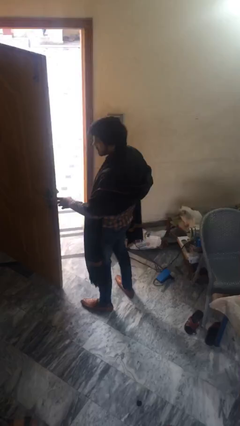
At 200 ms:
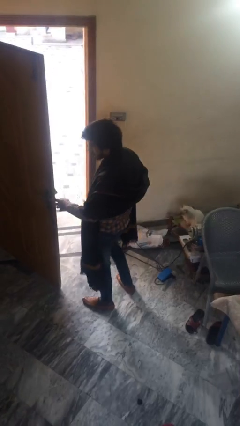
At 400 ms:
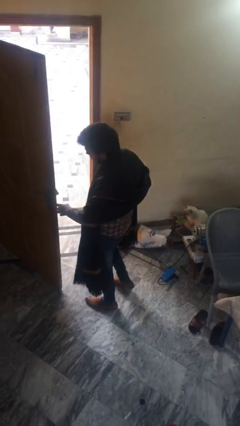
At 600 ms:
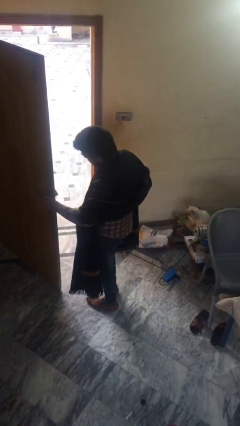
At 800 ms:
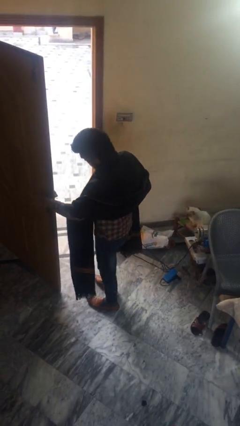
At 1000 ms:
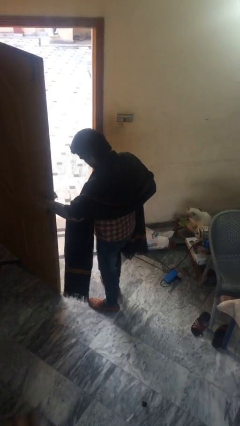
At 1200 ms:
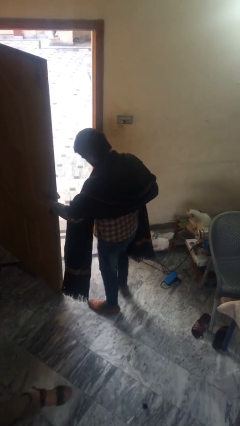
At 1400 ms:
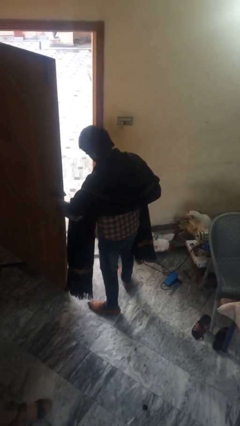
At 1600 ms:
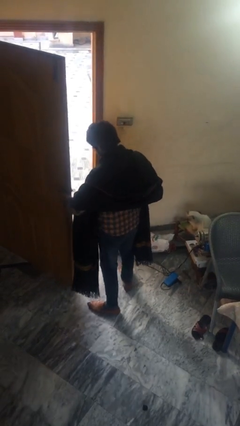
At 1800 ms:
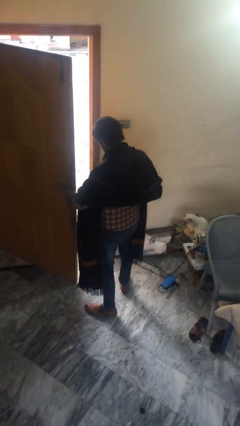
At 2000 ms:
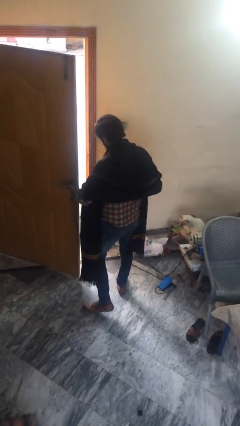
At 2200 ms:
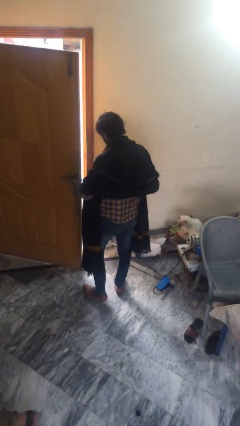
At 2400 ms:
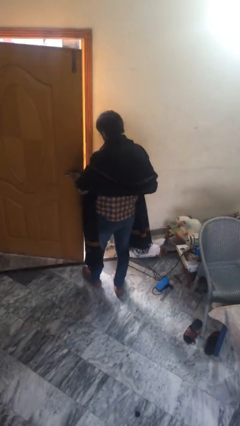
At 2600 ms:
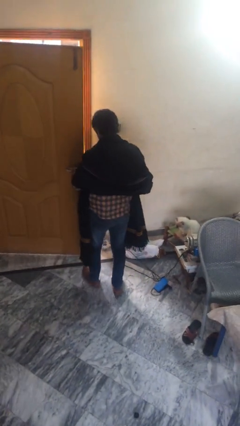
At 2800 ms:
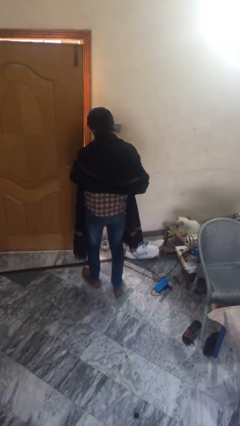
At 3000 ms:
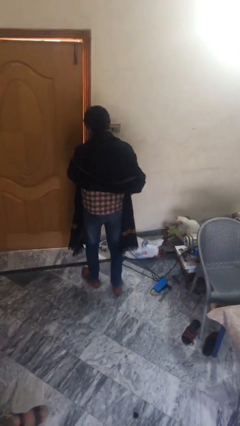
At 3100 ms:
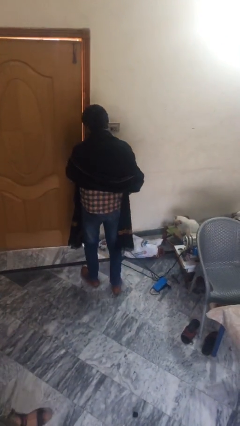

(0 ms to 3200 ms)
person closes facility door

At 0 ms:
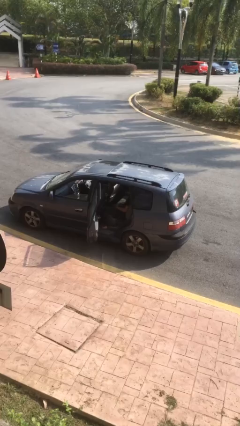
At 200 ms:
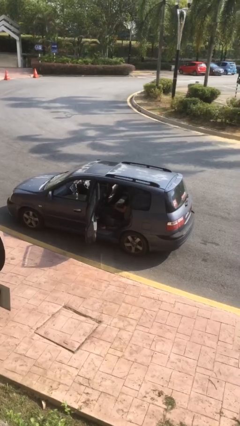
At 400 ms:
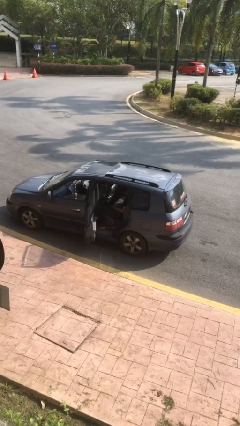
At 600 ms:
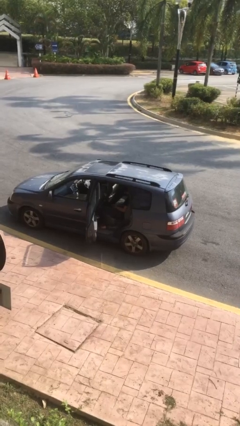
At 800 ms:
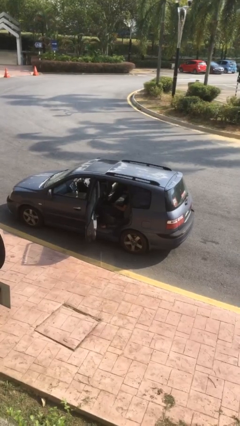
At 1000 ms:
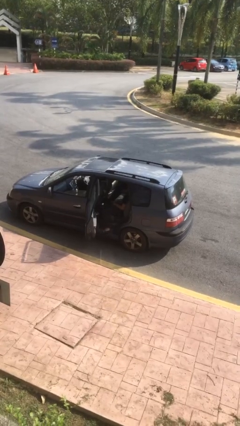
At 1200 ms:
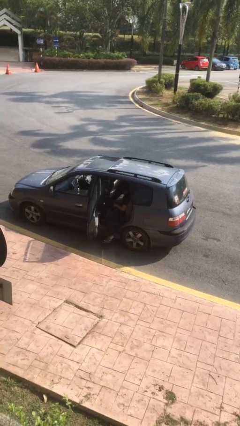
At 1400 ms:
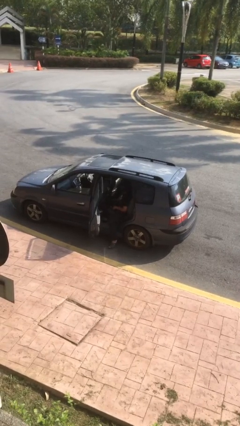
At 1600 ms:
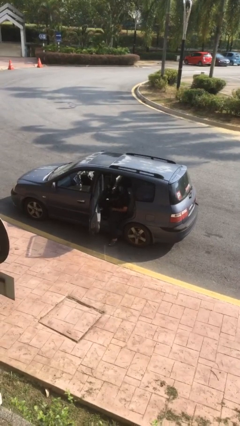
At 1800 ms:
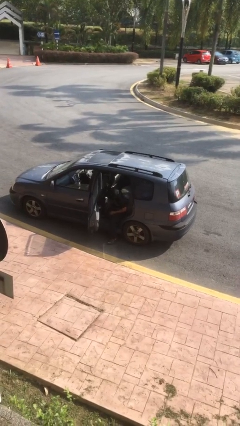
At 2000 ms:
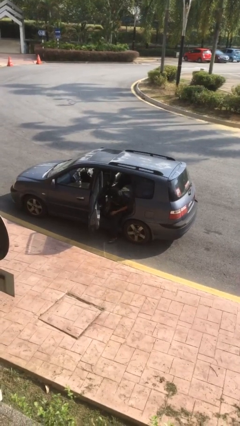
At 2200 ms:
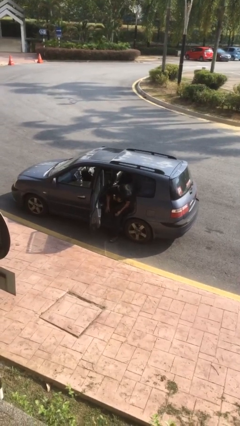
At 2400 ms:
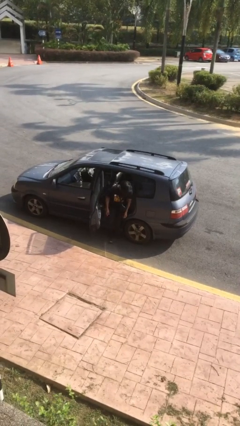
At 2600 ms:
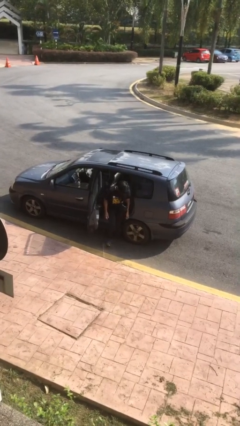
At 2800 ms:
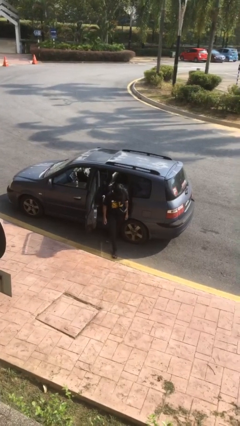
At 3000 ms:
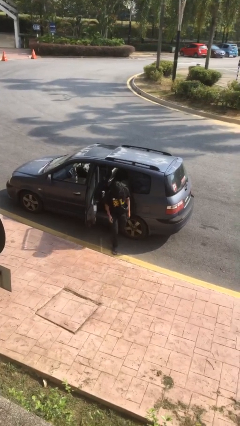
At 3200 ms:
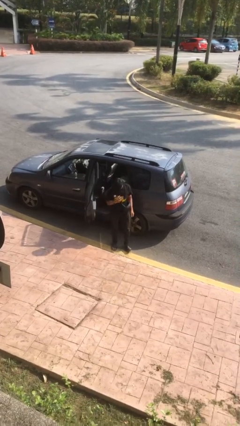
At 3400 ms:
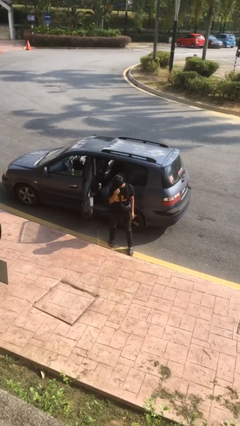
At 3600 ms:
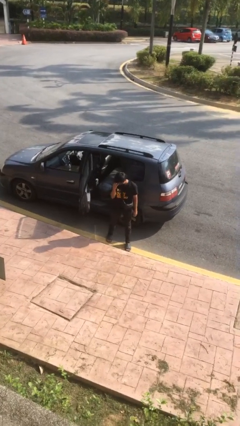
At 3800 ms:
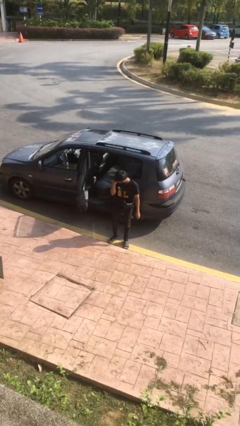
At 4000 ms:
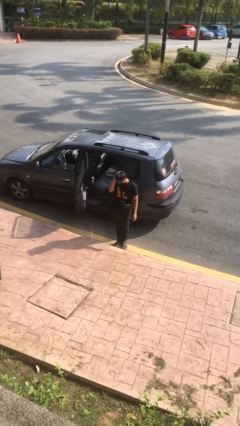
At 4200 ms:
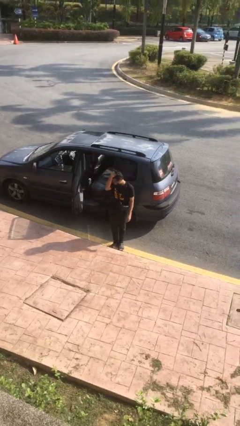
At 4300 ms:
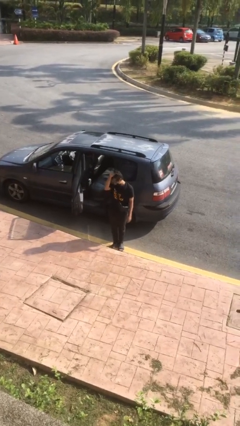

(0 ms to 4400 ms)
person exits car

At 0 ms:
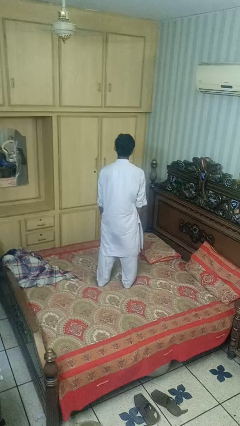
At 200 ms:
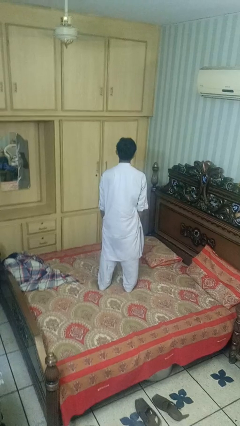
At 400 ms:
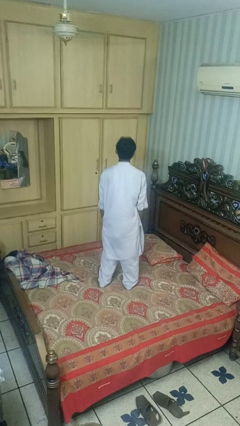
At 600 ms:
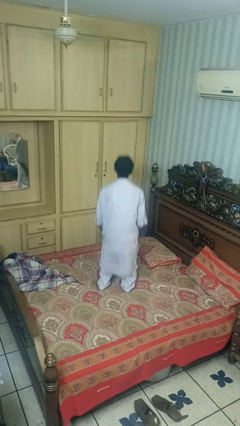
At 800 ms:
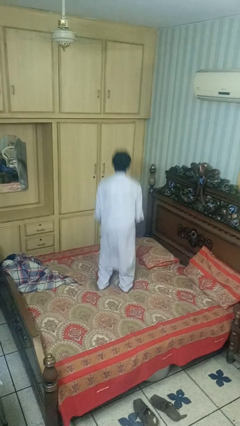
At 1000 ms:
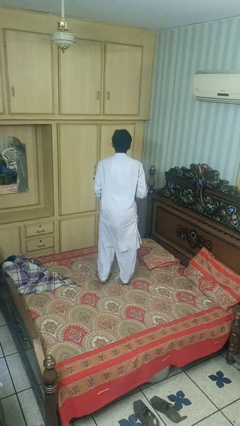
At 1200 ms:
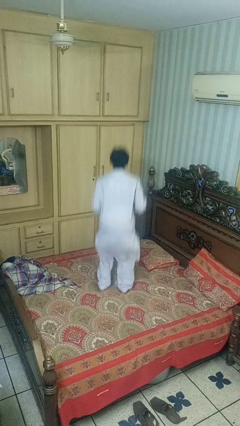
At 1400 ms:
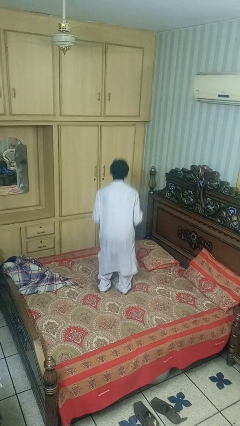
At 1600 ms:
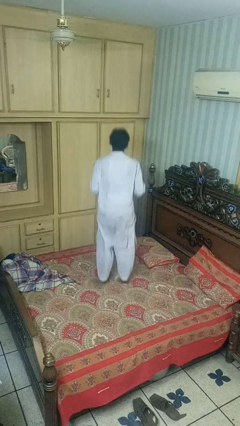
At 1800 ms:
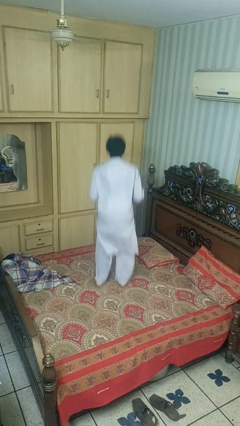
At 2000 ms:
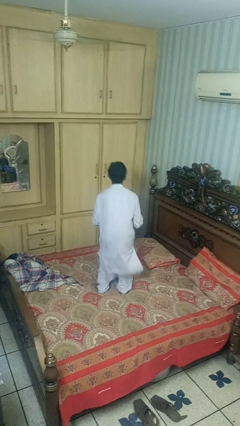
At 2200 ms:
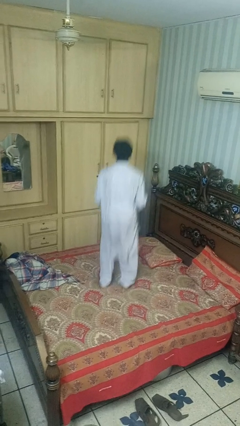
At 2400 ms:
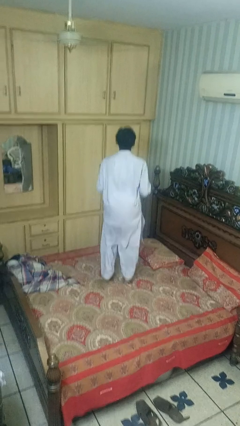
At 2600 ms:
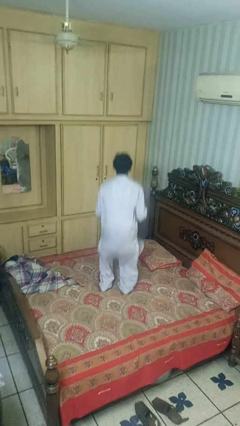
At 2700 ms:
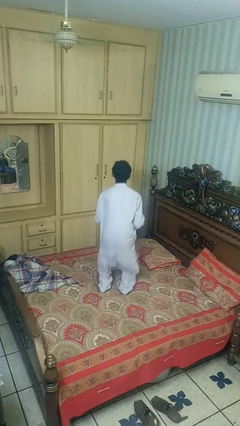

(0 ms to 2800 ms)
person jumps on bed

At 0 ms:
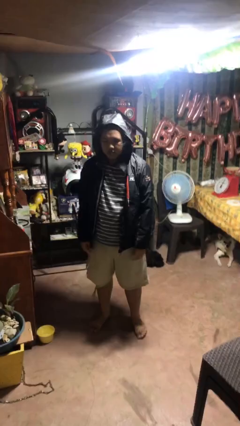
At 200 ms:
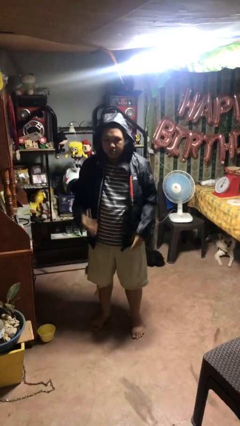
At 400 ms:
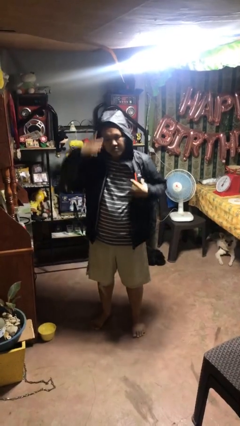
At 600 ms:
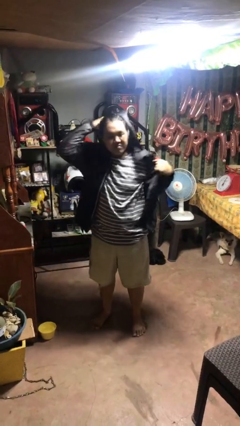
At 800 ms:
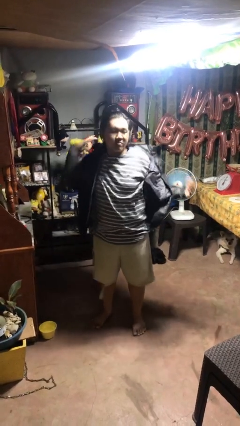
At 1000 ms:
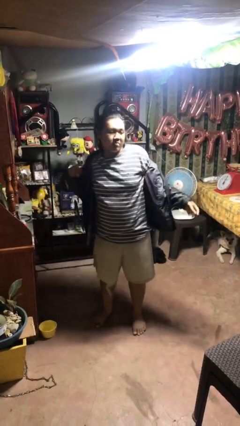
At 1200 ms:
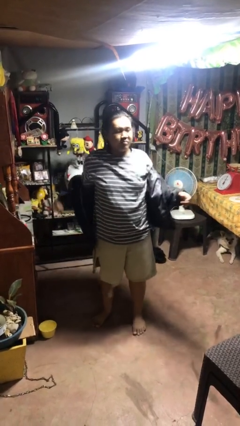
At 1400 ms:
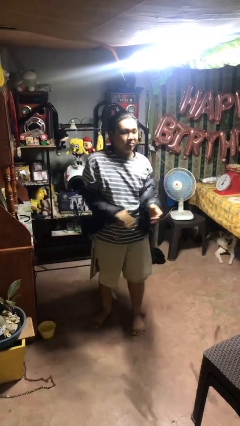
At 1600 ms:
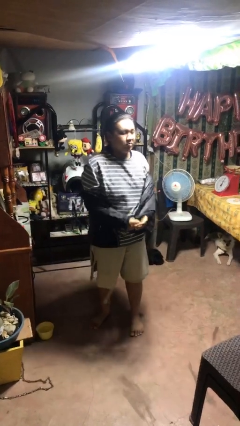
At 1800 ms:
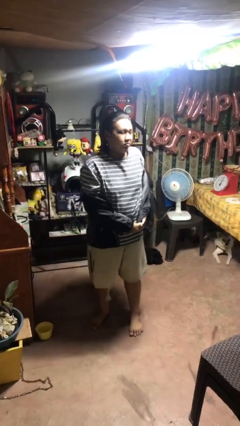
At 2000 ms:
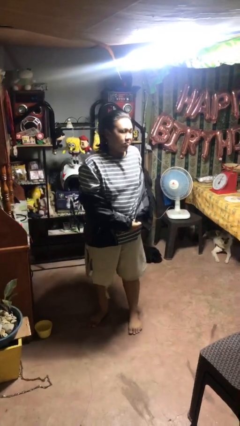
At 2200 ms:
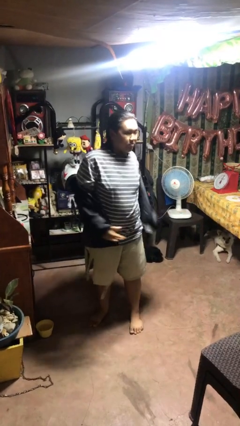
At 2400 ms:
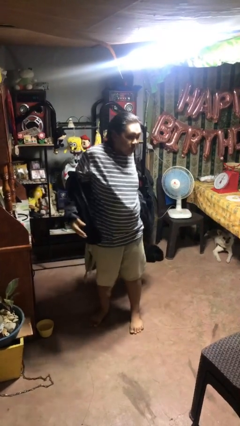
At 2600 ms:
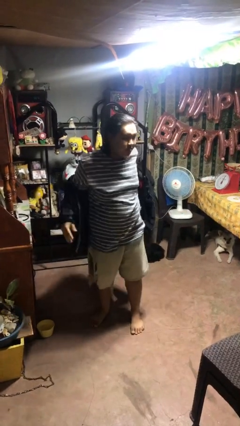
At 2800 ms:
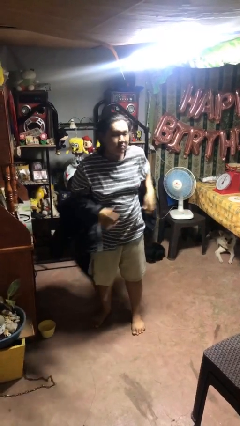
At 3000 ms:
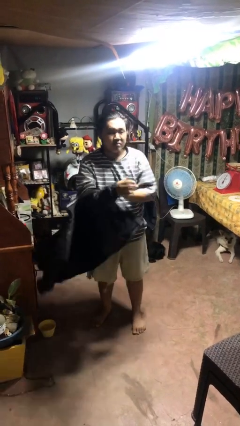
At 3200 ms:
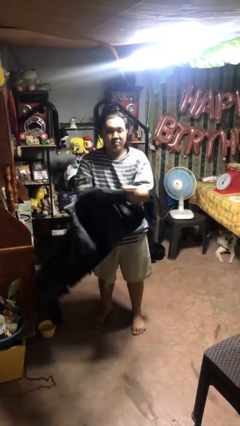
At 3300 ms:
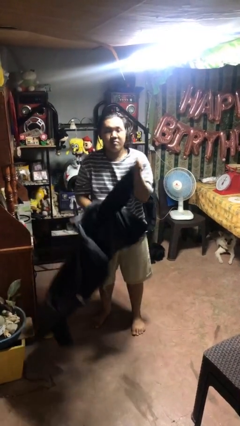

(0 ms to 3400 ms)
person takes off hoodie

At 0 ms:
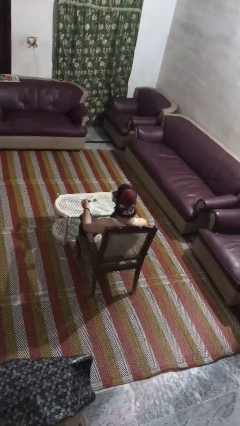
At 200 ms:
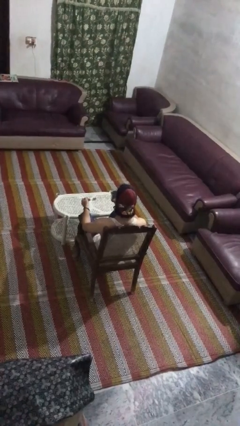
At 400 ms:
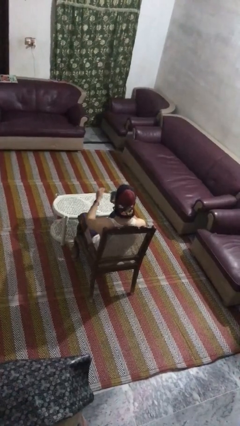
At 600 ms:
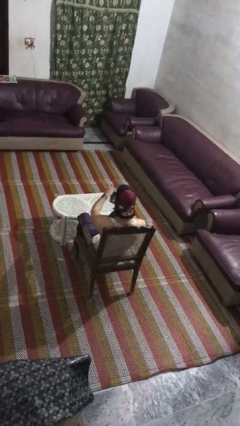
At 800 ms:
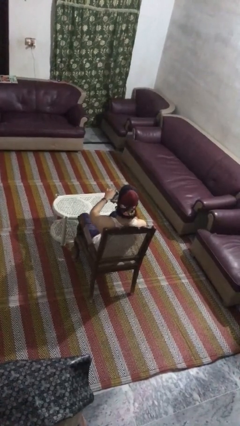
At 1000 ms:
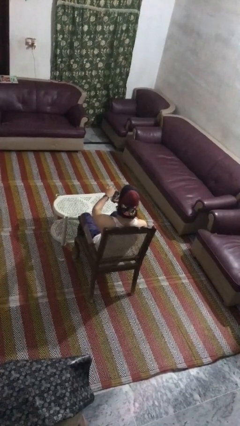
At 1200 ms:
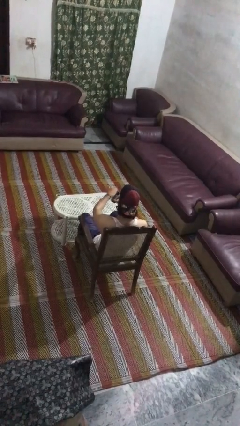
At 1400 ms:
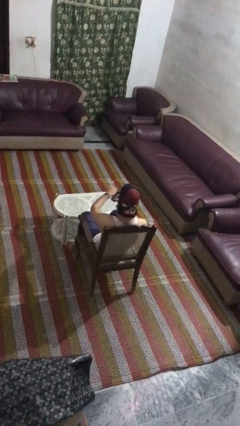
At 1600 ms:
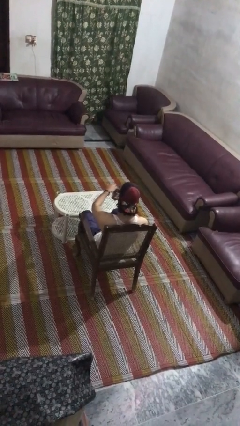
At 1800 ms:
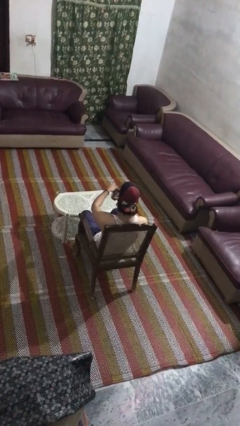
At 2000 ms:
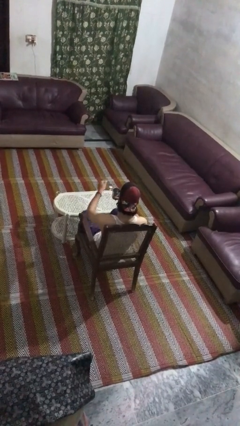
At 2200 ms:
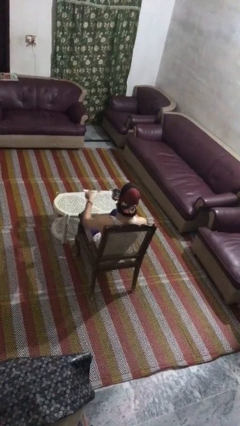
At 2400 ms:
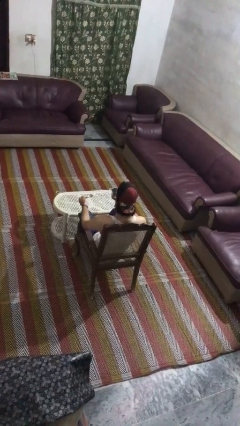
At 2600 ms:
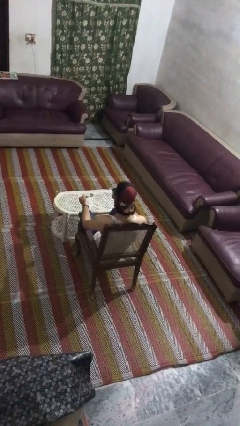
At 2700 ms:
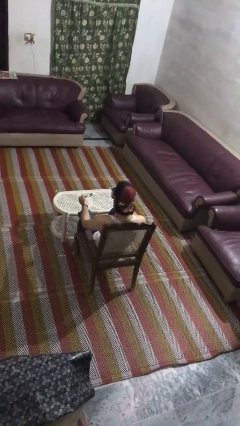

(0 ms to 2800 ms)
person stirs mug

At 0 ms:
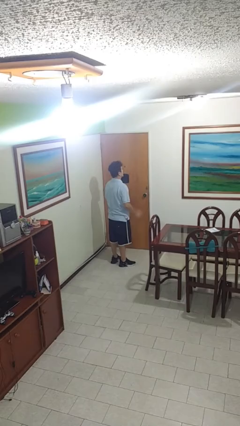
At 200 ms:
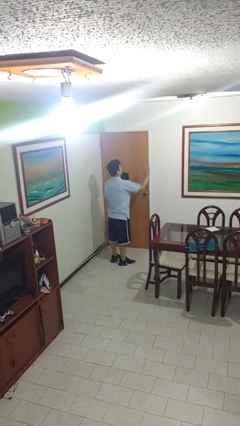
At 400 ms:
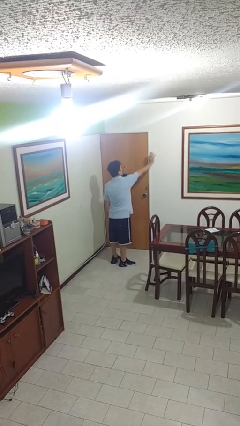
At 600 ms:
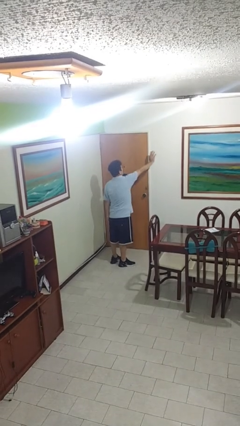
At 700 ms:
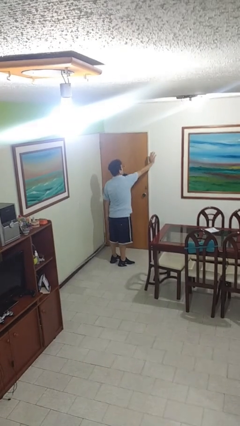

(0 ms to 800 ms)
person gestures stop

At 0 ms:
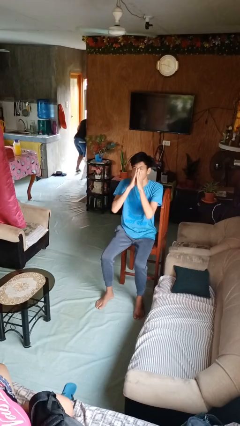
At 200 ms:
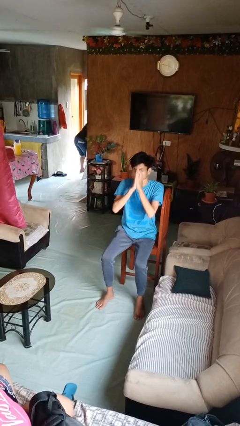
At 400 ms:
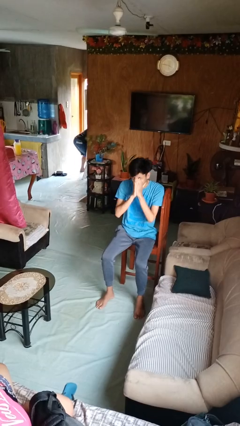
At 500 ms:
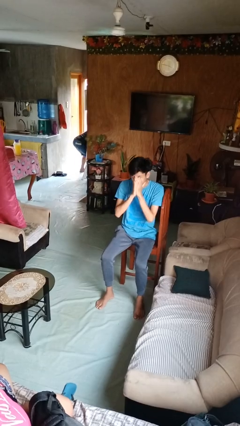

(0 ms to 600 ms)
person sneezes into hand
